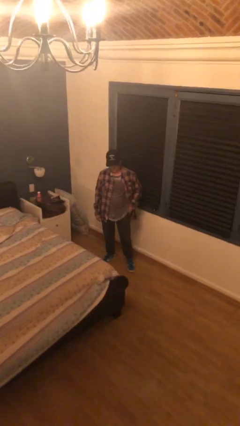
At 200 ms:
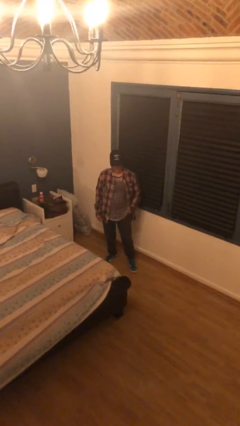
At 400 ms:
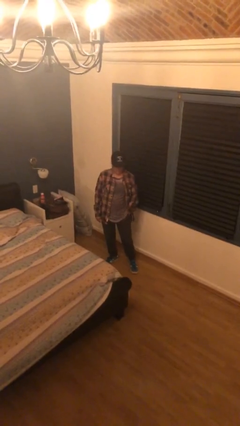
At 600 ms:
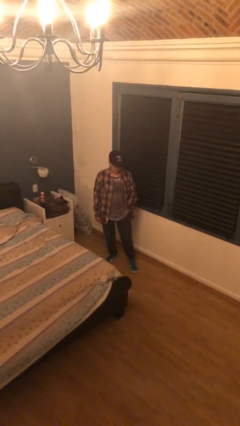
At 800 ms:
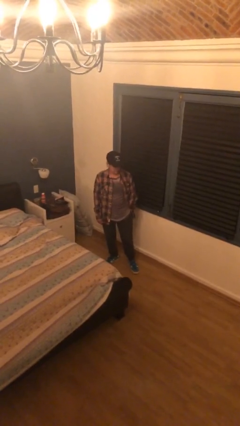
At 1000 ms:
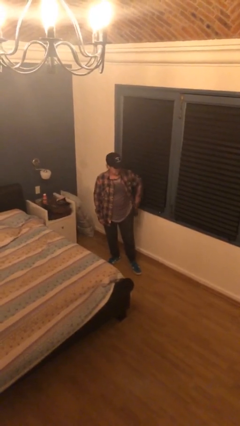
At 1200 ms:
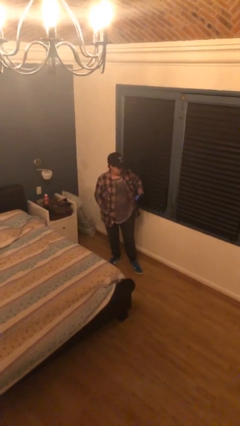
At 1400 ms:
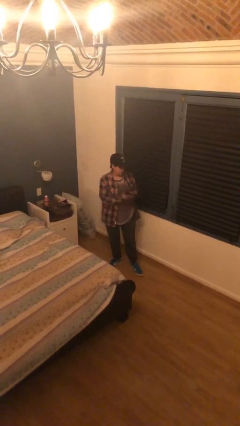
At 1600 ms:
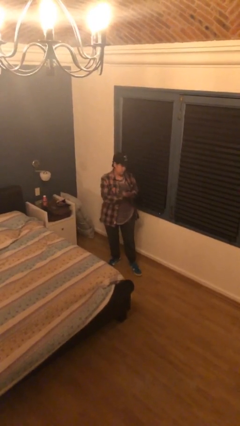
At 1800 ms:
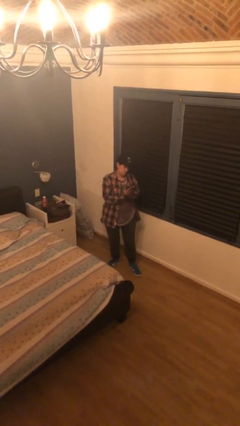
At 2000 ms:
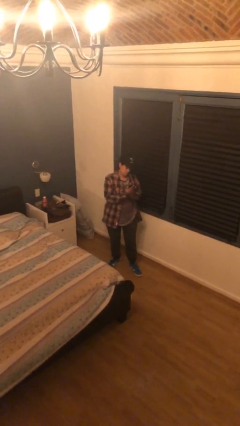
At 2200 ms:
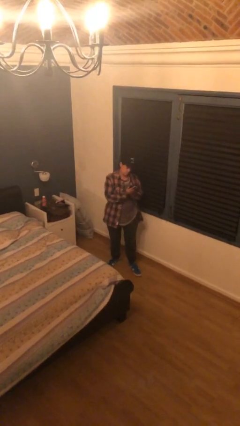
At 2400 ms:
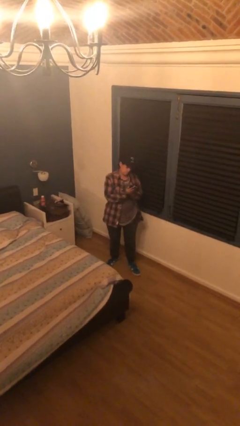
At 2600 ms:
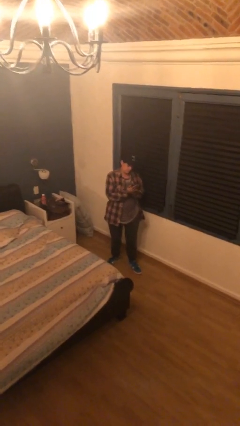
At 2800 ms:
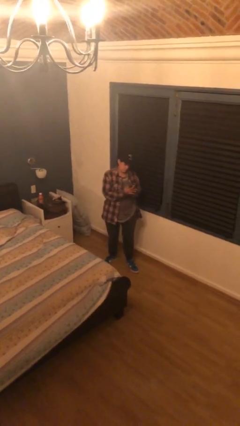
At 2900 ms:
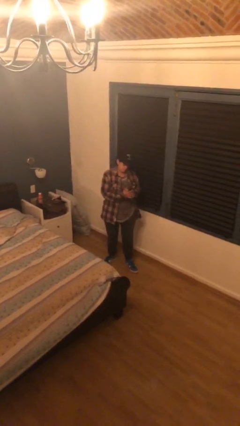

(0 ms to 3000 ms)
person takes phone from pocket

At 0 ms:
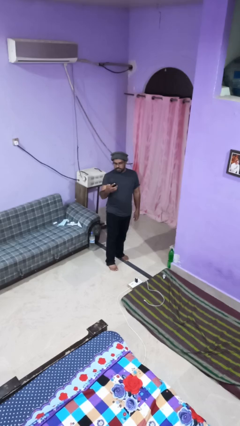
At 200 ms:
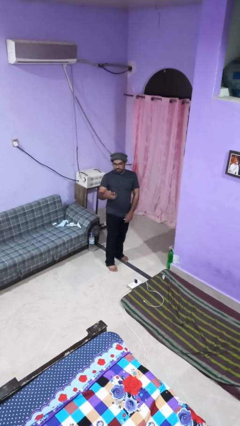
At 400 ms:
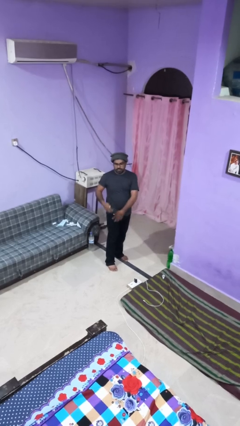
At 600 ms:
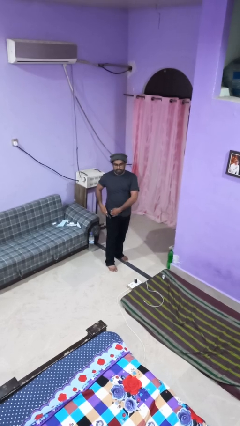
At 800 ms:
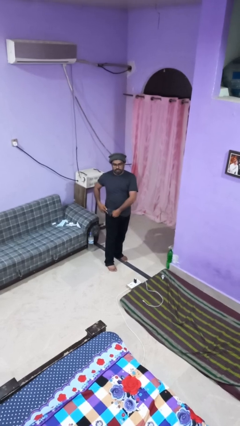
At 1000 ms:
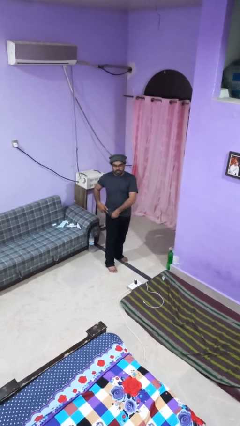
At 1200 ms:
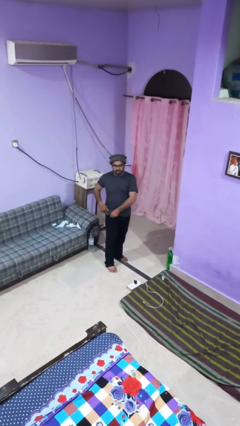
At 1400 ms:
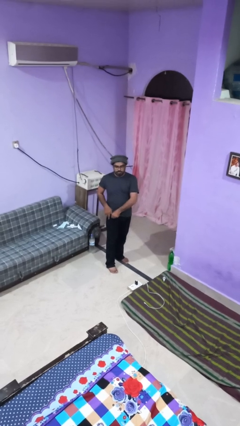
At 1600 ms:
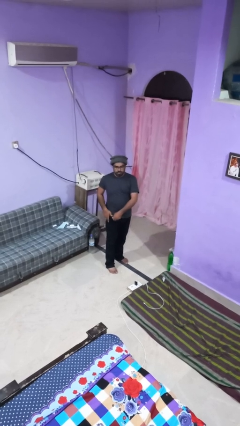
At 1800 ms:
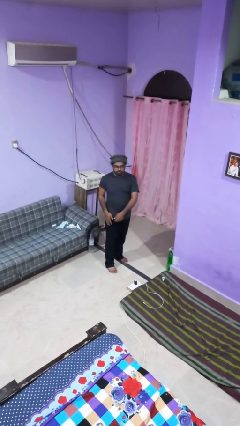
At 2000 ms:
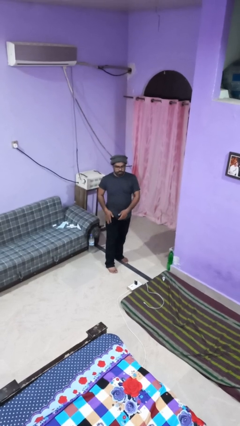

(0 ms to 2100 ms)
person puts phone into pocket

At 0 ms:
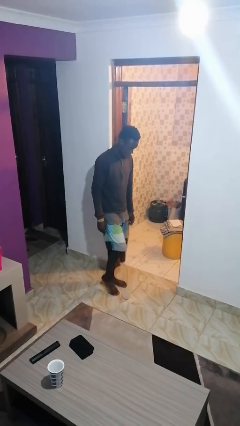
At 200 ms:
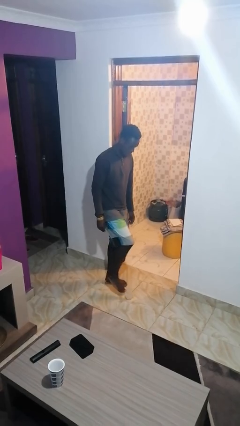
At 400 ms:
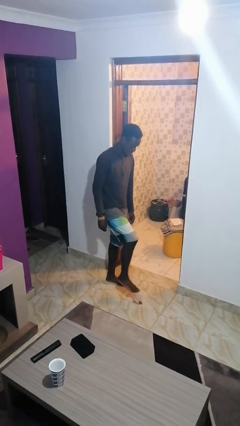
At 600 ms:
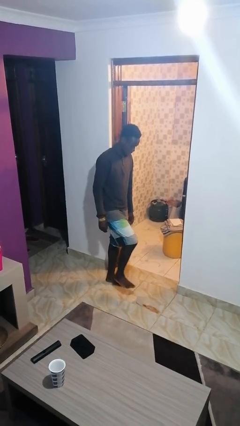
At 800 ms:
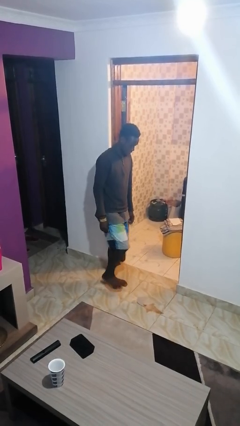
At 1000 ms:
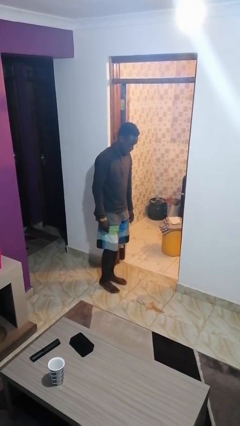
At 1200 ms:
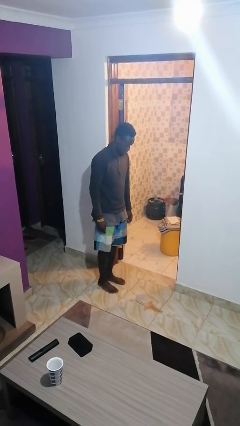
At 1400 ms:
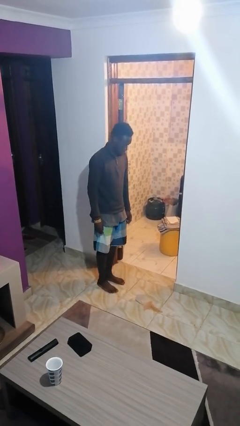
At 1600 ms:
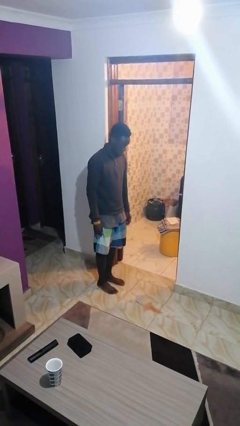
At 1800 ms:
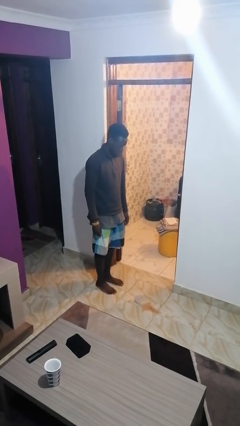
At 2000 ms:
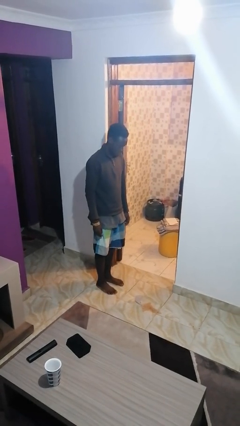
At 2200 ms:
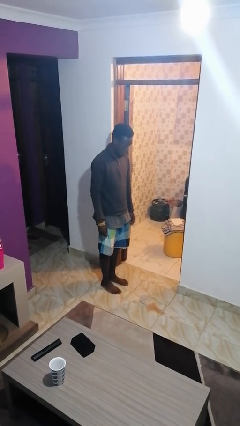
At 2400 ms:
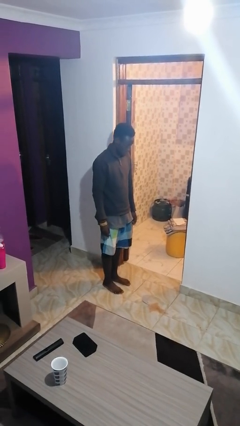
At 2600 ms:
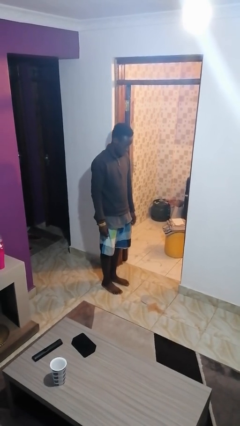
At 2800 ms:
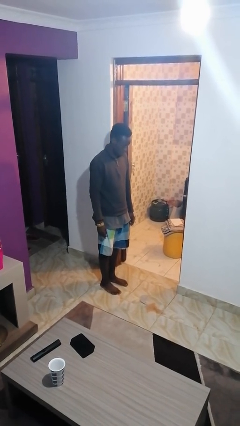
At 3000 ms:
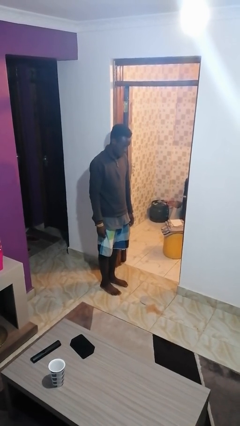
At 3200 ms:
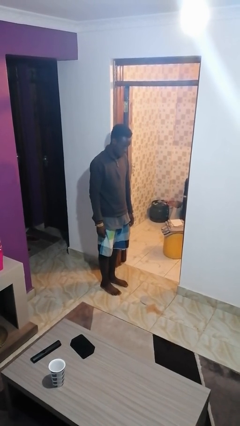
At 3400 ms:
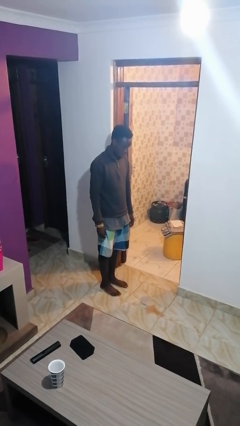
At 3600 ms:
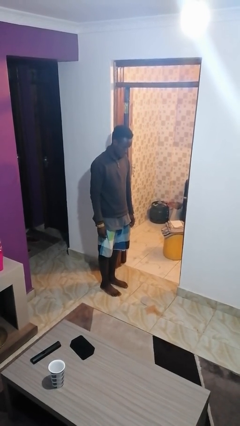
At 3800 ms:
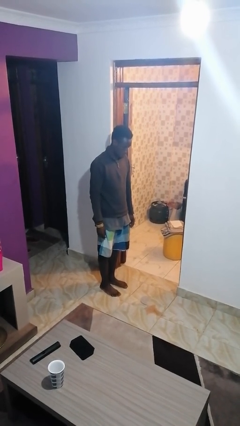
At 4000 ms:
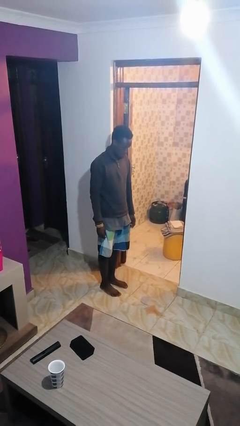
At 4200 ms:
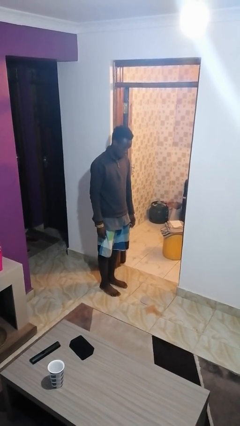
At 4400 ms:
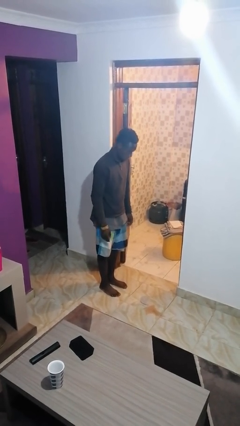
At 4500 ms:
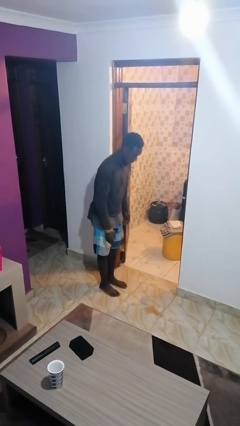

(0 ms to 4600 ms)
person spills on floor

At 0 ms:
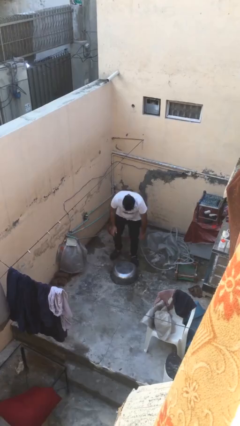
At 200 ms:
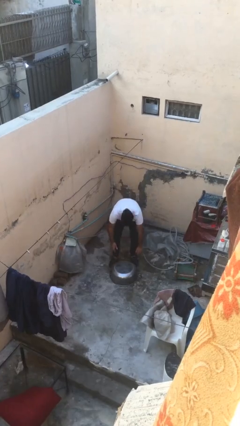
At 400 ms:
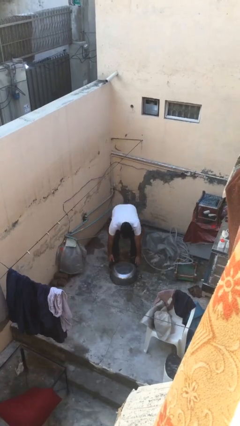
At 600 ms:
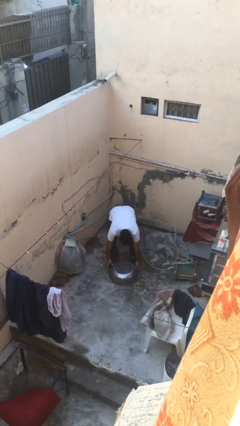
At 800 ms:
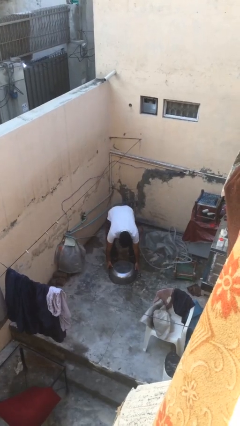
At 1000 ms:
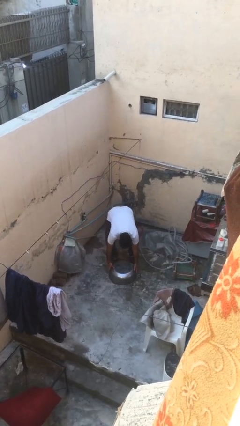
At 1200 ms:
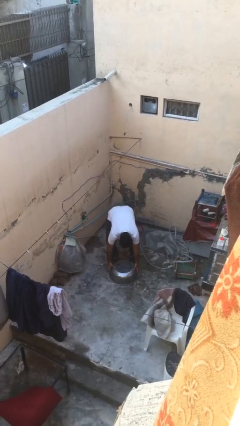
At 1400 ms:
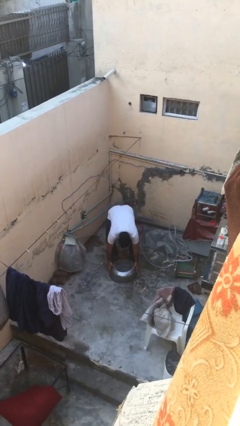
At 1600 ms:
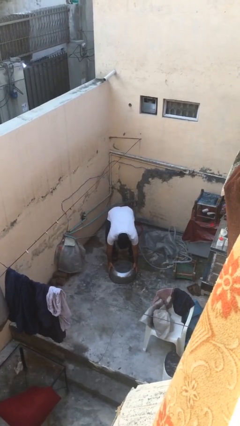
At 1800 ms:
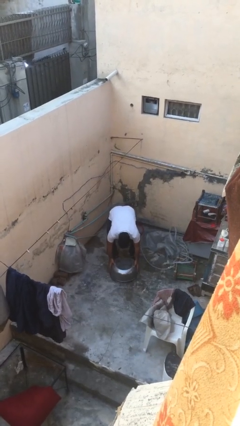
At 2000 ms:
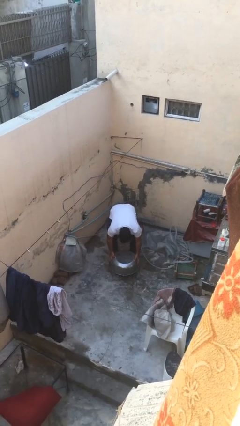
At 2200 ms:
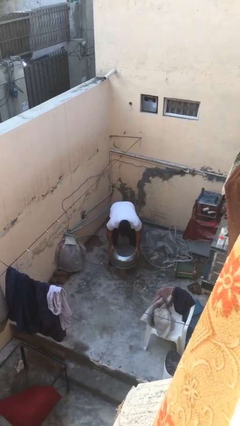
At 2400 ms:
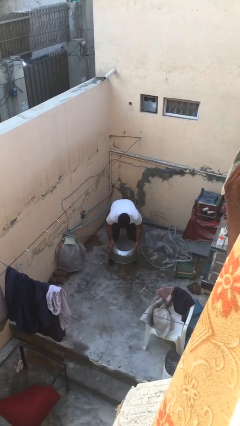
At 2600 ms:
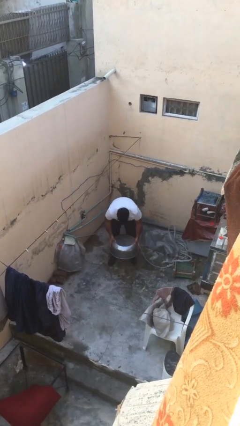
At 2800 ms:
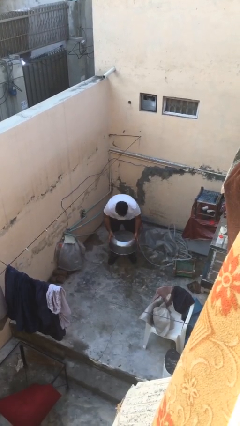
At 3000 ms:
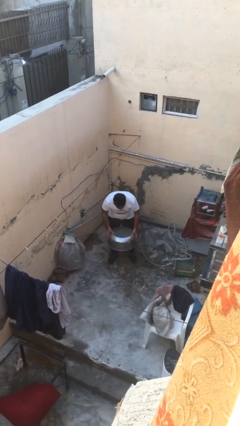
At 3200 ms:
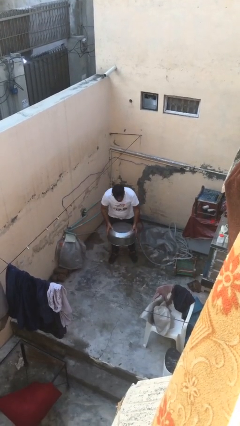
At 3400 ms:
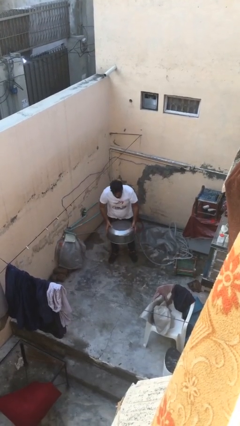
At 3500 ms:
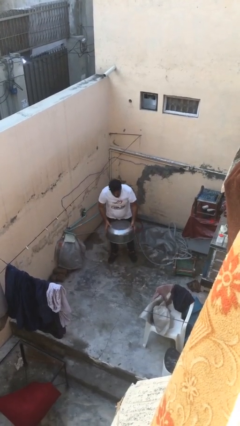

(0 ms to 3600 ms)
person picks up object from floor

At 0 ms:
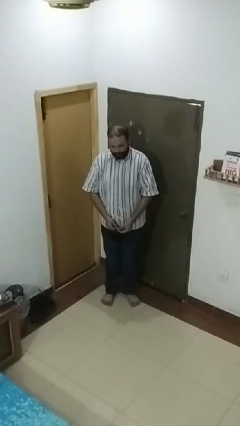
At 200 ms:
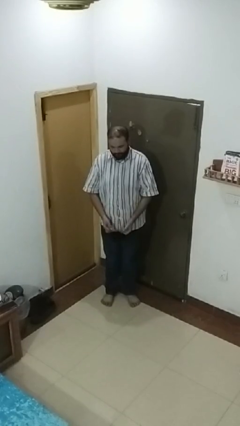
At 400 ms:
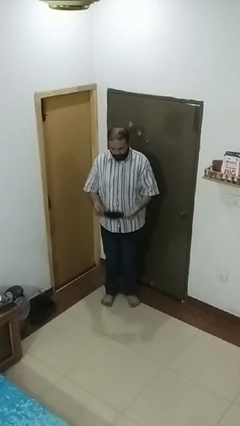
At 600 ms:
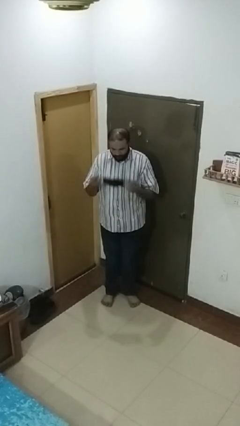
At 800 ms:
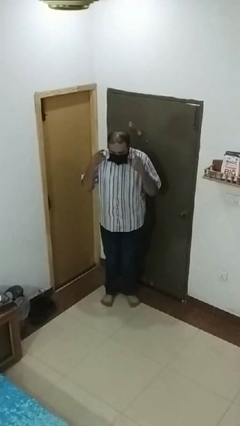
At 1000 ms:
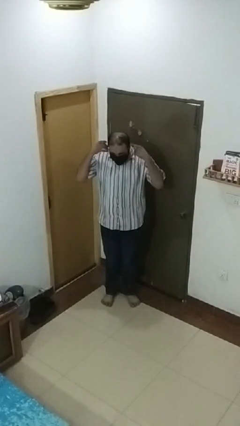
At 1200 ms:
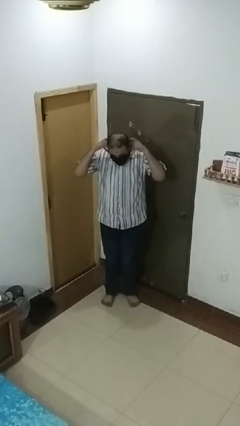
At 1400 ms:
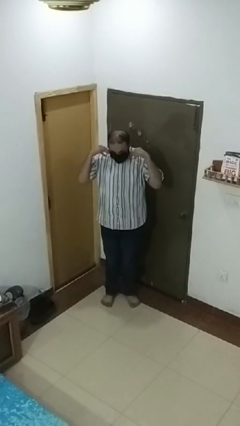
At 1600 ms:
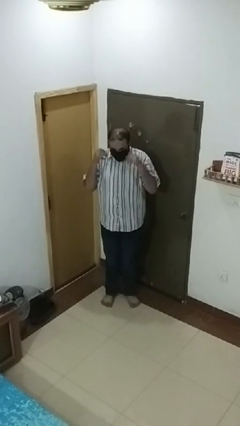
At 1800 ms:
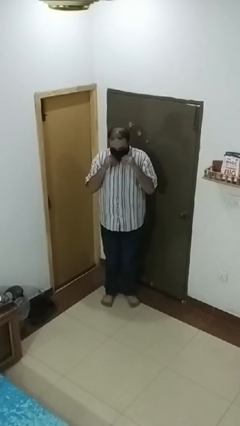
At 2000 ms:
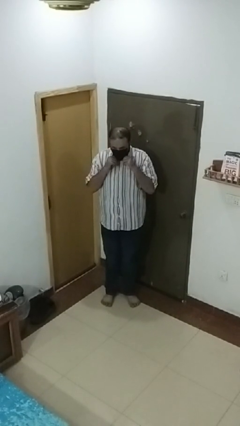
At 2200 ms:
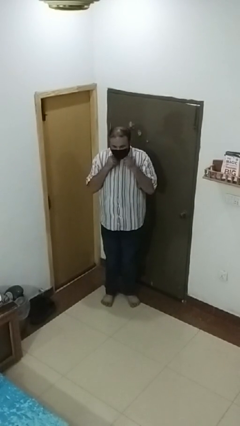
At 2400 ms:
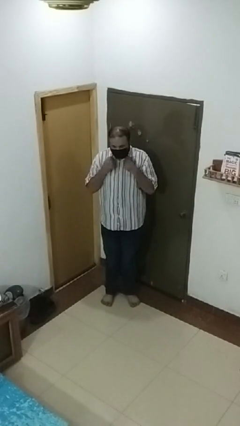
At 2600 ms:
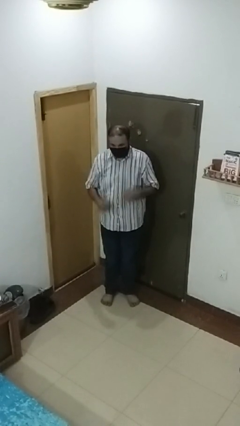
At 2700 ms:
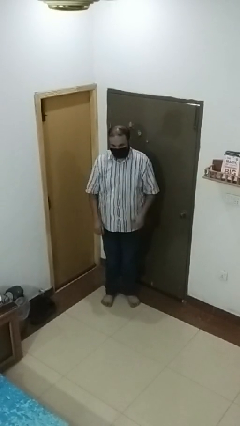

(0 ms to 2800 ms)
person puts on facemask

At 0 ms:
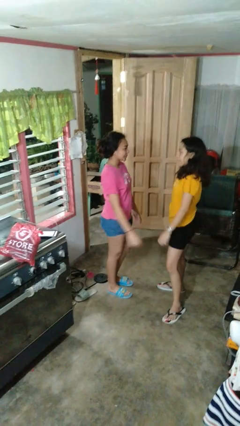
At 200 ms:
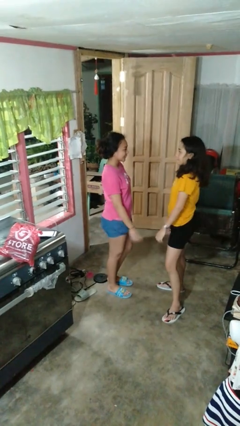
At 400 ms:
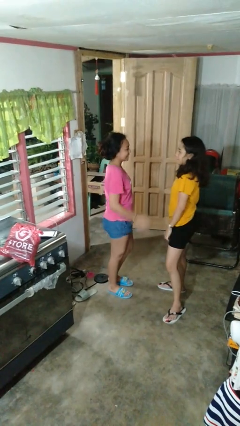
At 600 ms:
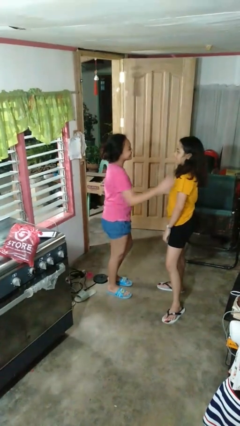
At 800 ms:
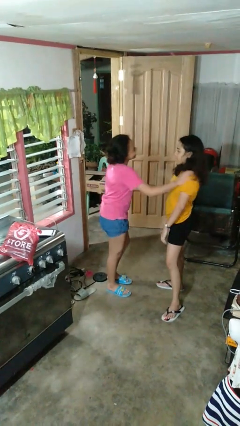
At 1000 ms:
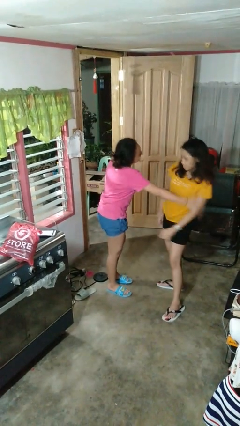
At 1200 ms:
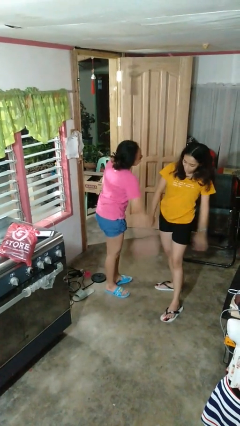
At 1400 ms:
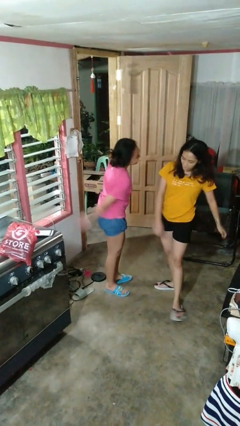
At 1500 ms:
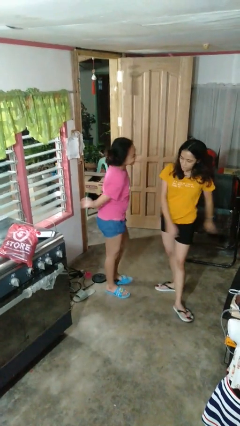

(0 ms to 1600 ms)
person shoves person
